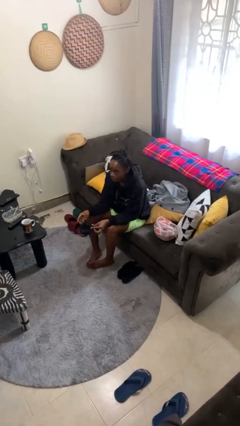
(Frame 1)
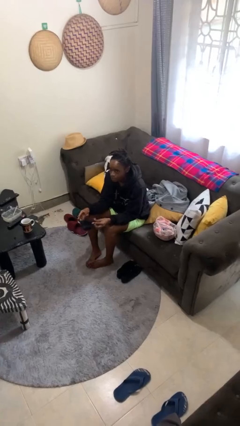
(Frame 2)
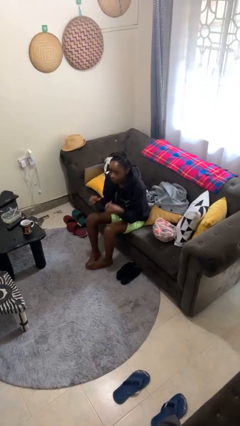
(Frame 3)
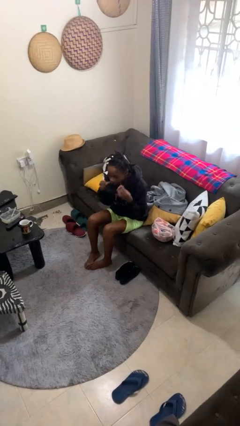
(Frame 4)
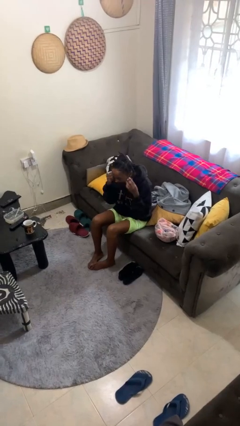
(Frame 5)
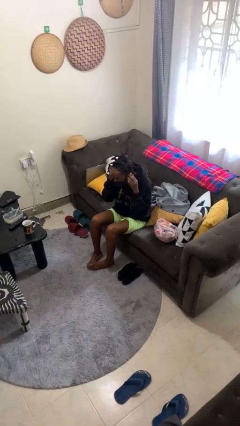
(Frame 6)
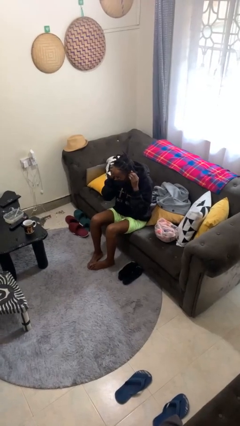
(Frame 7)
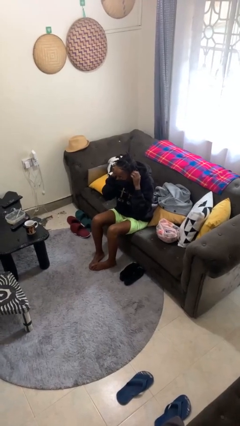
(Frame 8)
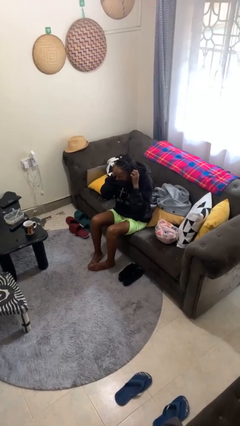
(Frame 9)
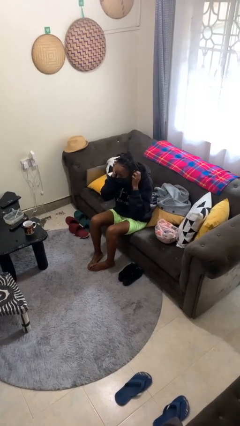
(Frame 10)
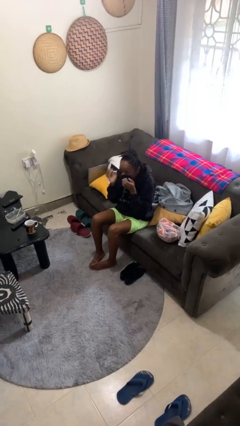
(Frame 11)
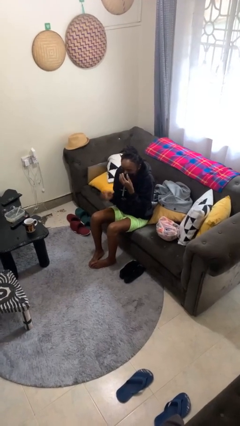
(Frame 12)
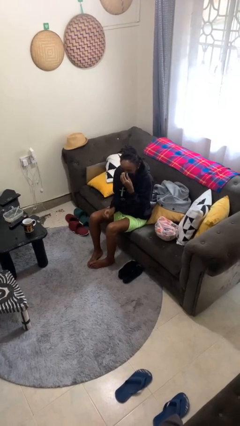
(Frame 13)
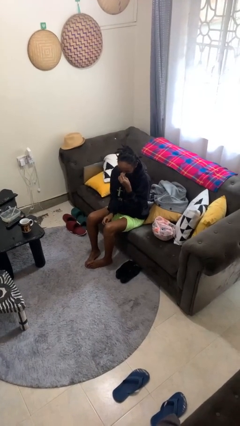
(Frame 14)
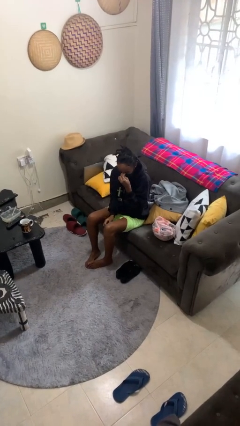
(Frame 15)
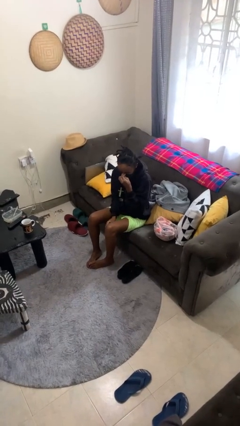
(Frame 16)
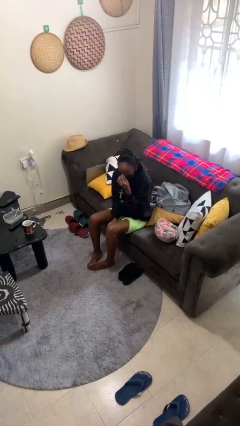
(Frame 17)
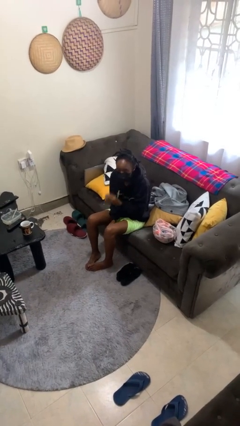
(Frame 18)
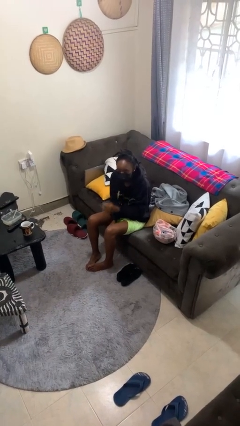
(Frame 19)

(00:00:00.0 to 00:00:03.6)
person puts on facemask

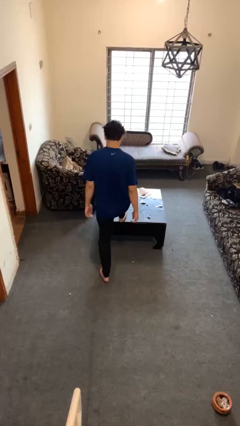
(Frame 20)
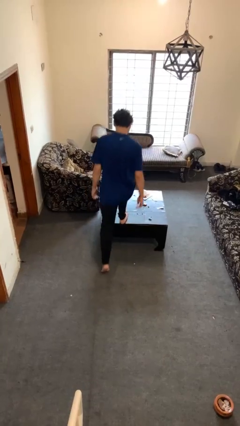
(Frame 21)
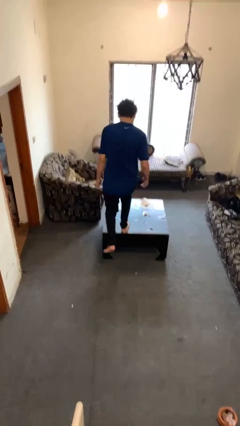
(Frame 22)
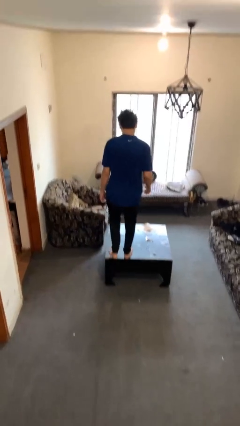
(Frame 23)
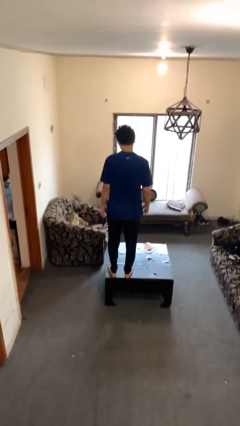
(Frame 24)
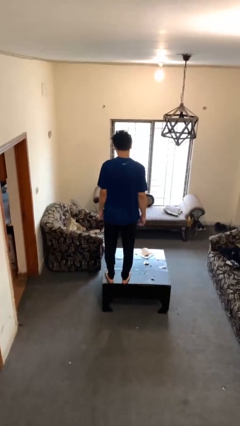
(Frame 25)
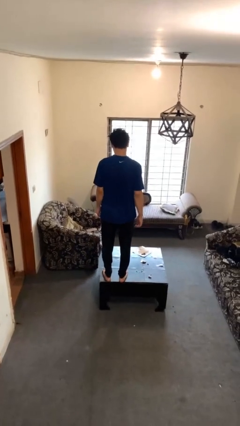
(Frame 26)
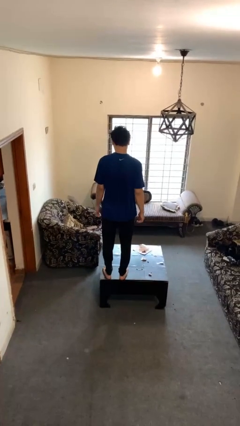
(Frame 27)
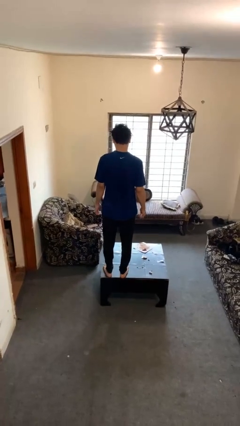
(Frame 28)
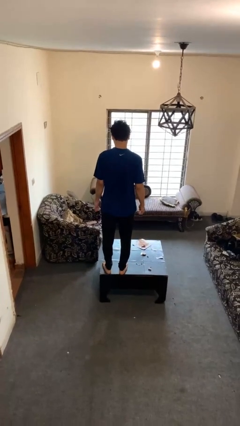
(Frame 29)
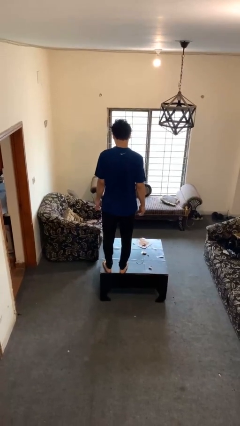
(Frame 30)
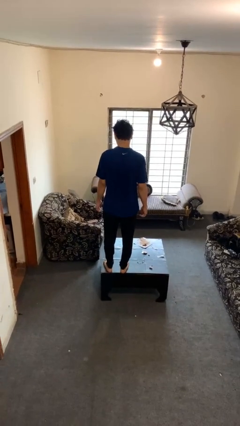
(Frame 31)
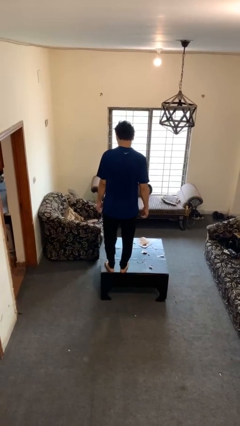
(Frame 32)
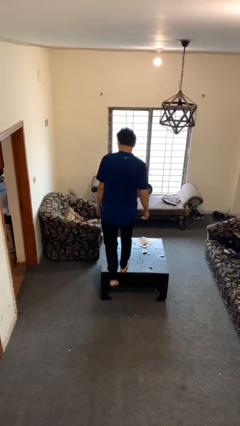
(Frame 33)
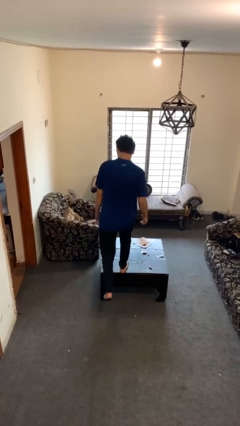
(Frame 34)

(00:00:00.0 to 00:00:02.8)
person climbs on table

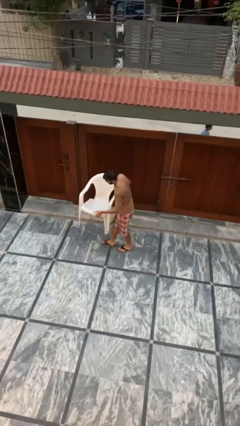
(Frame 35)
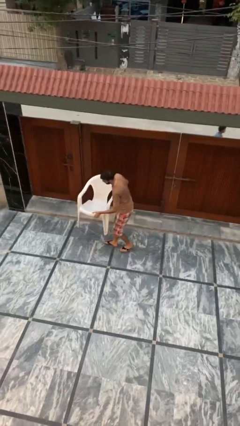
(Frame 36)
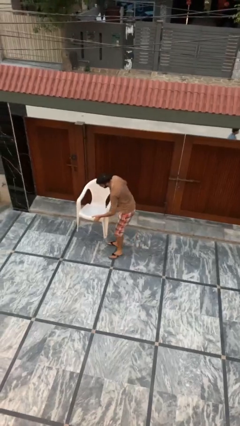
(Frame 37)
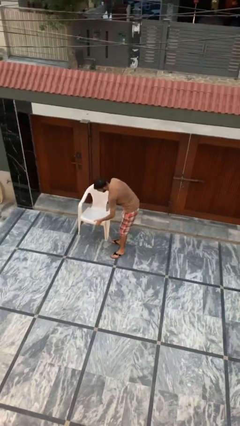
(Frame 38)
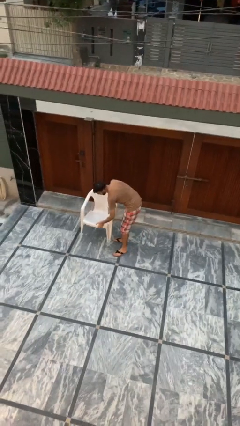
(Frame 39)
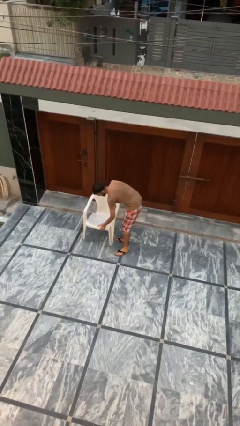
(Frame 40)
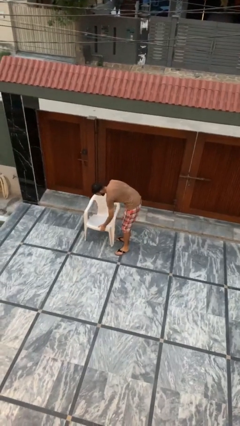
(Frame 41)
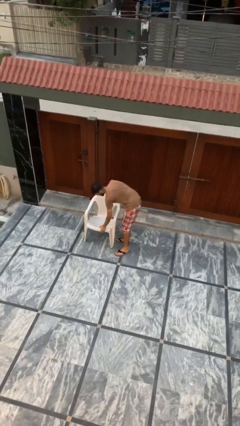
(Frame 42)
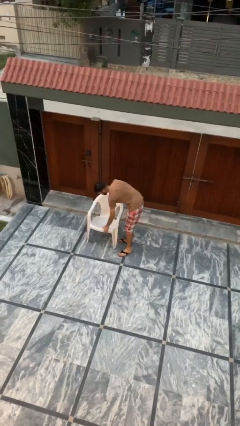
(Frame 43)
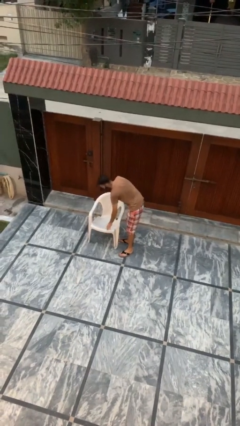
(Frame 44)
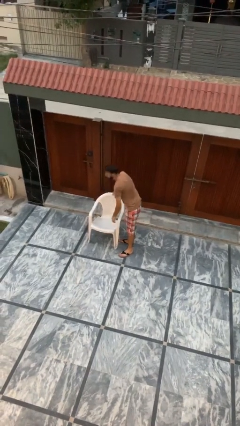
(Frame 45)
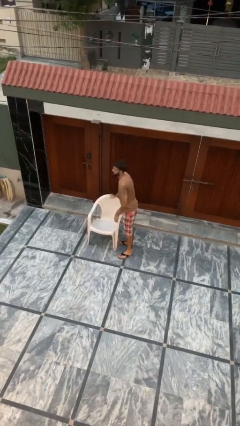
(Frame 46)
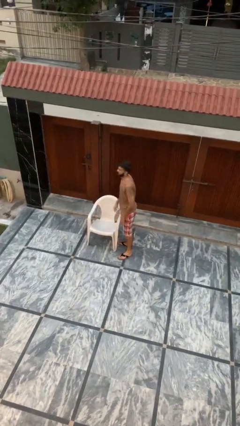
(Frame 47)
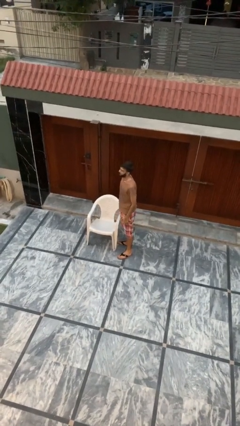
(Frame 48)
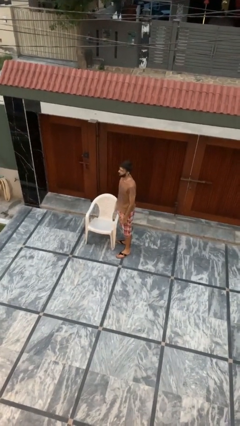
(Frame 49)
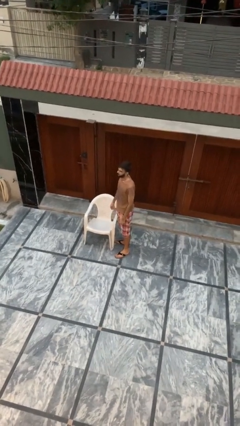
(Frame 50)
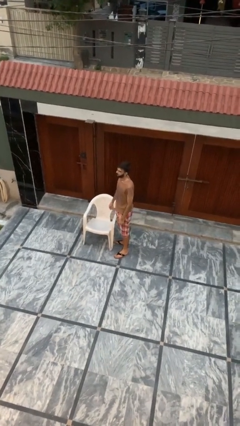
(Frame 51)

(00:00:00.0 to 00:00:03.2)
person puts down object on floor

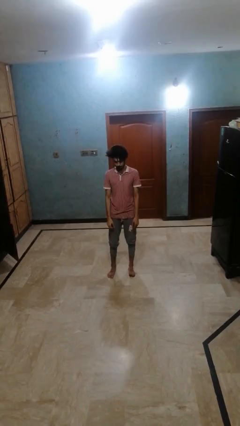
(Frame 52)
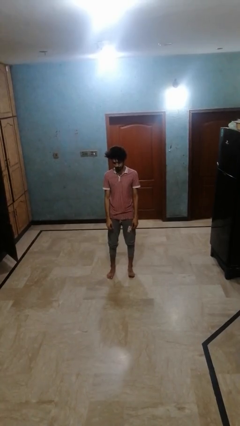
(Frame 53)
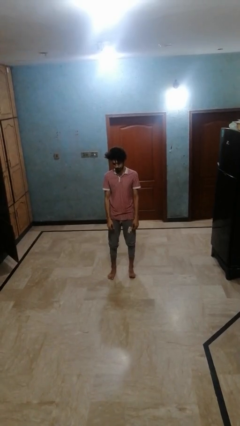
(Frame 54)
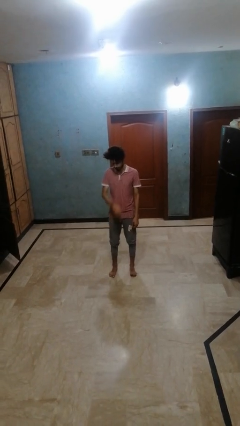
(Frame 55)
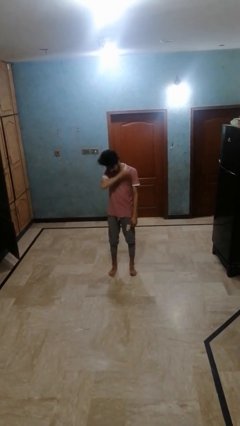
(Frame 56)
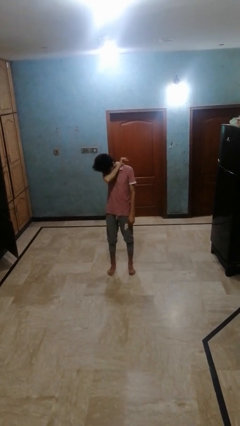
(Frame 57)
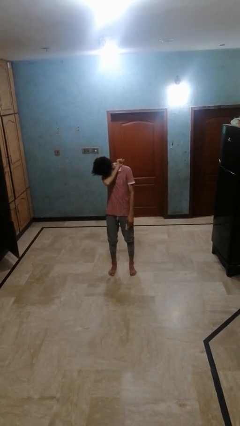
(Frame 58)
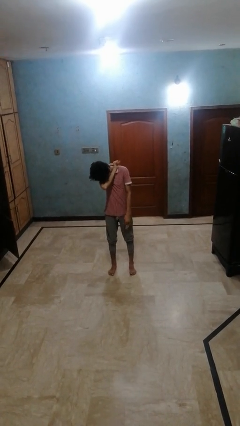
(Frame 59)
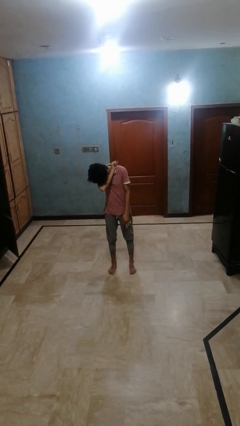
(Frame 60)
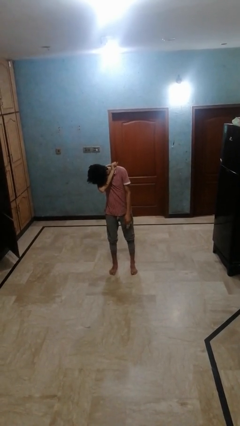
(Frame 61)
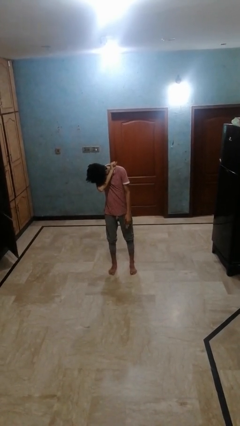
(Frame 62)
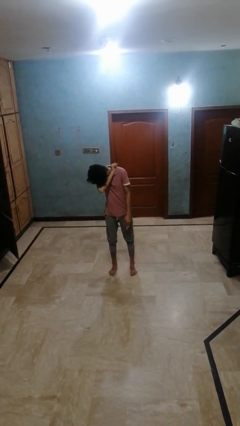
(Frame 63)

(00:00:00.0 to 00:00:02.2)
person sneezes into arm

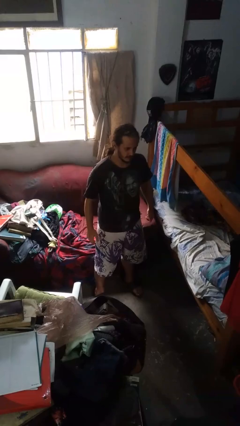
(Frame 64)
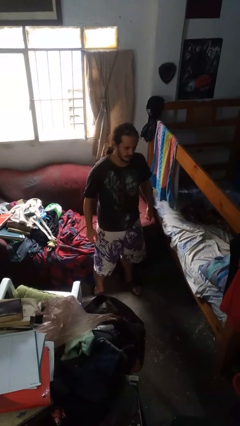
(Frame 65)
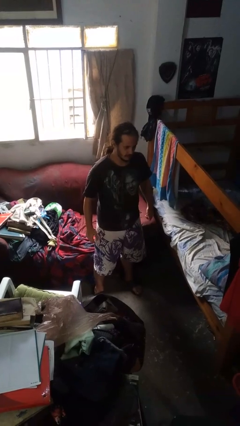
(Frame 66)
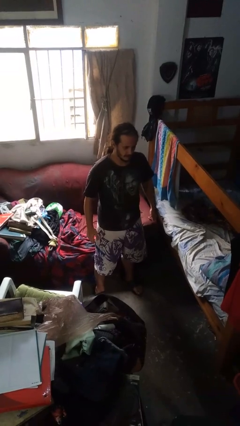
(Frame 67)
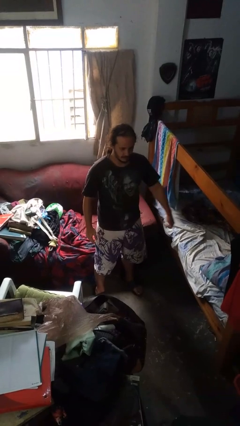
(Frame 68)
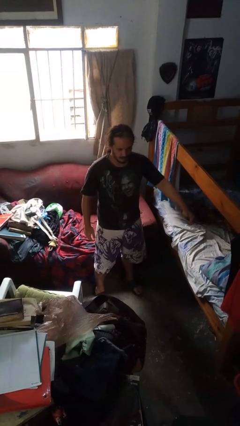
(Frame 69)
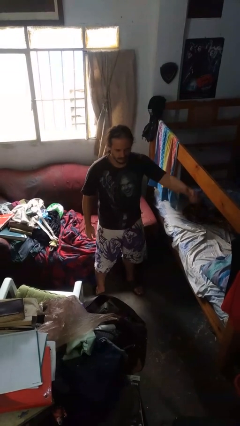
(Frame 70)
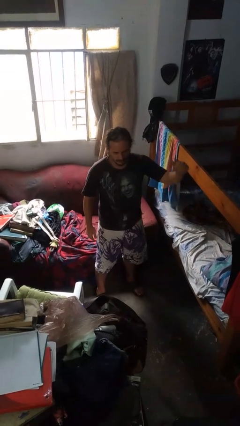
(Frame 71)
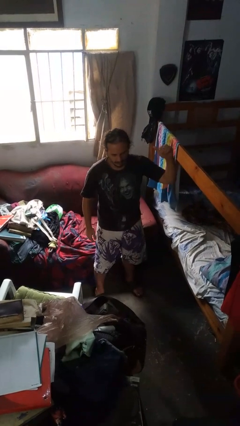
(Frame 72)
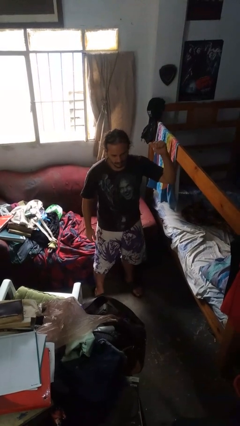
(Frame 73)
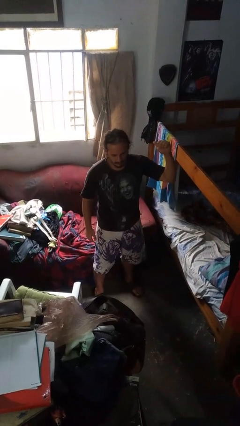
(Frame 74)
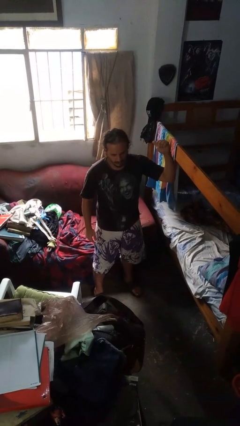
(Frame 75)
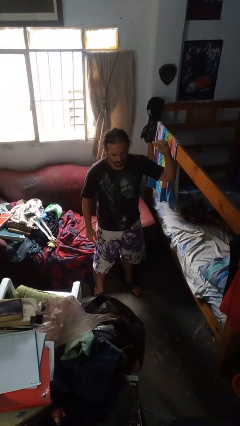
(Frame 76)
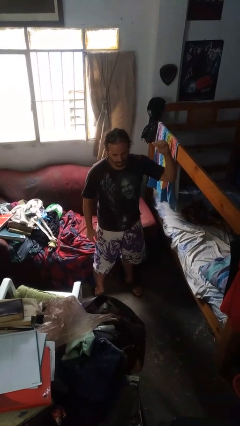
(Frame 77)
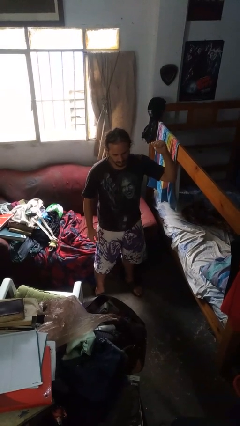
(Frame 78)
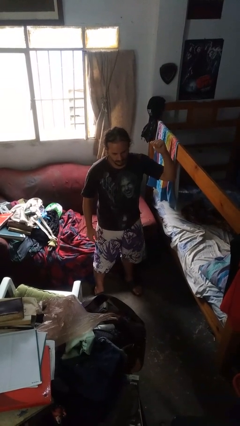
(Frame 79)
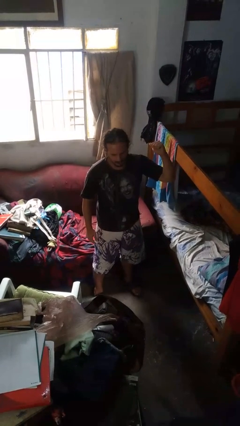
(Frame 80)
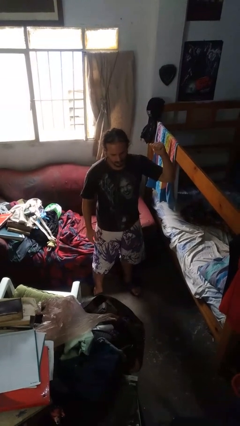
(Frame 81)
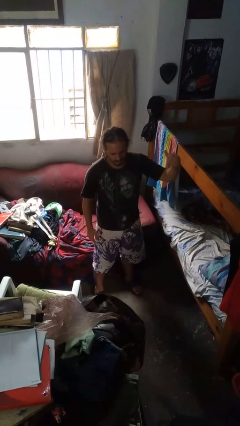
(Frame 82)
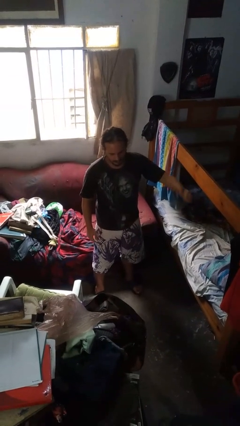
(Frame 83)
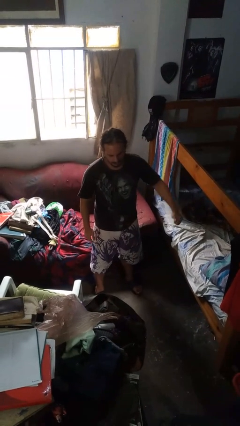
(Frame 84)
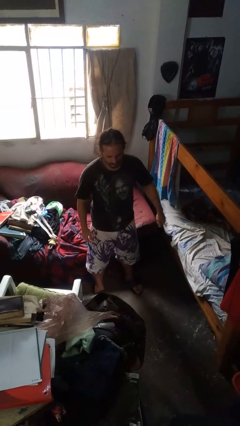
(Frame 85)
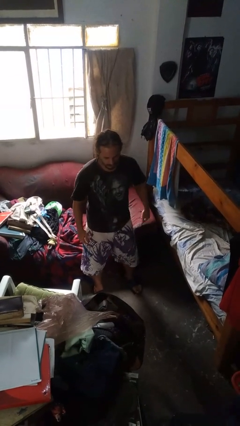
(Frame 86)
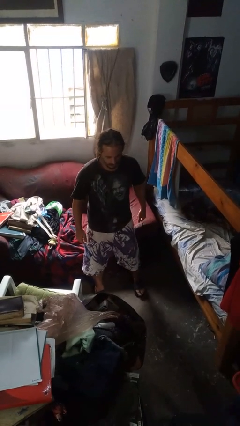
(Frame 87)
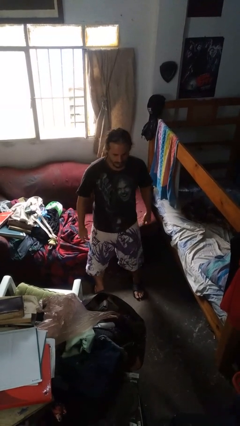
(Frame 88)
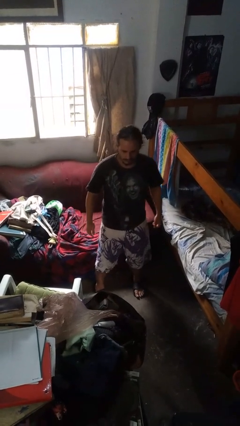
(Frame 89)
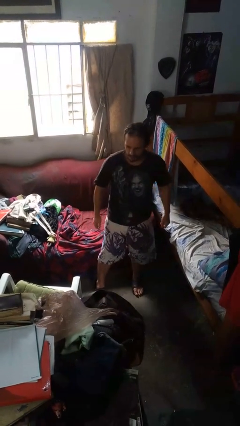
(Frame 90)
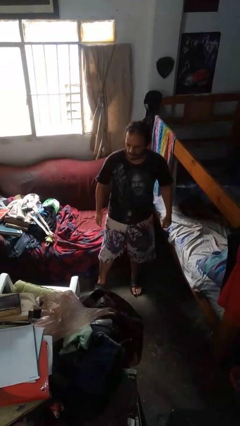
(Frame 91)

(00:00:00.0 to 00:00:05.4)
person gestures behind me

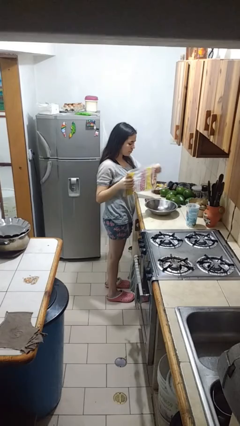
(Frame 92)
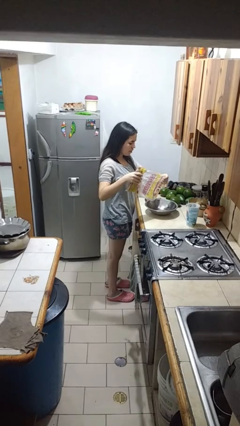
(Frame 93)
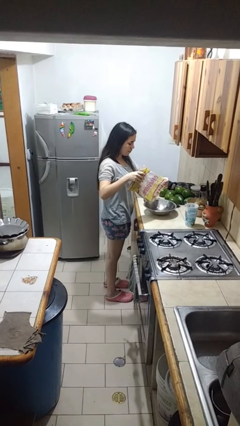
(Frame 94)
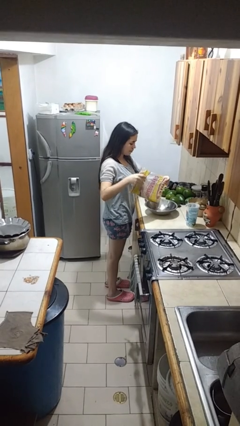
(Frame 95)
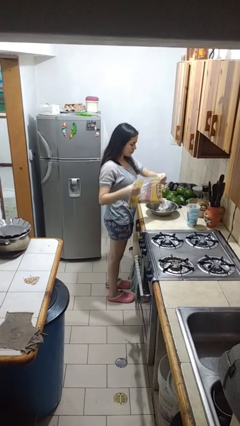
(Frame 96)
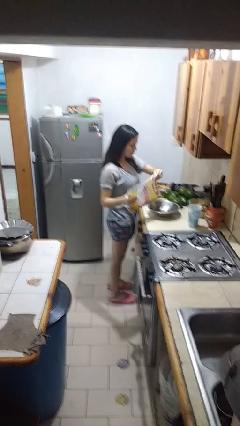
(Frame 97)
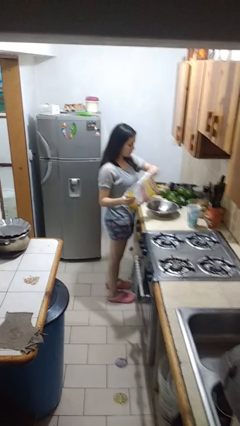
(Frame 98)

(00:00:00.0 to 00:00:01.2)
person pours into bowl